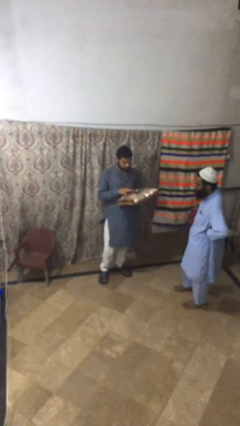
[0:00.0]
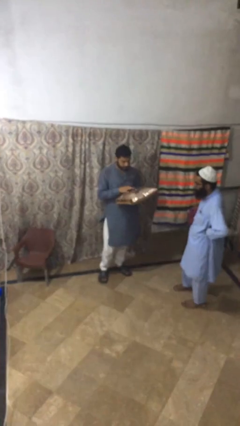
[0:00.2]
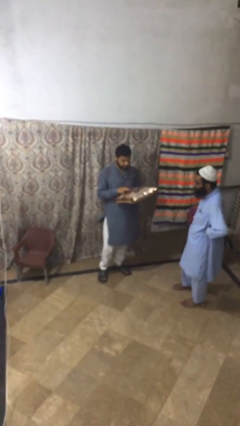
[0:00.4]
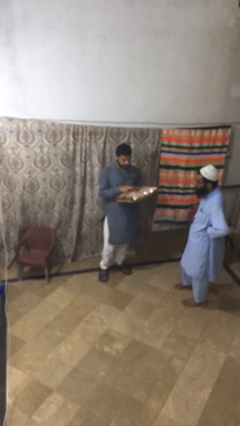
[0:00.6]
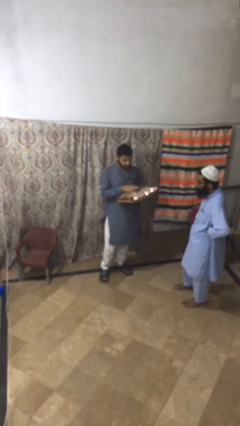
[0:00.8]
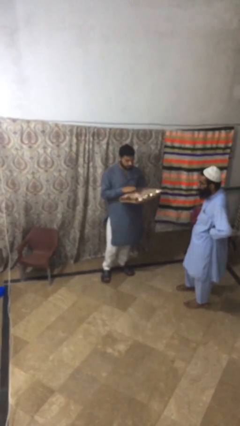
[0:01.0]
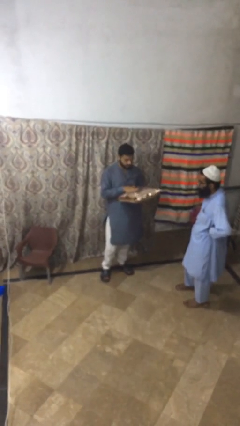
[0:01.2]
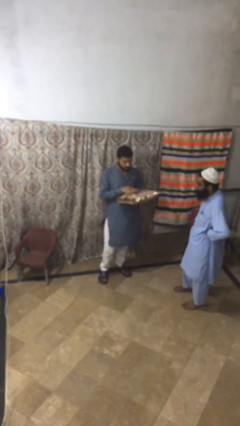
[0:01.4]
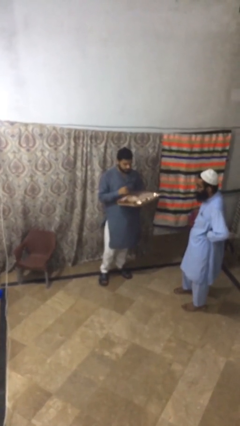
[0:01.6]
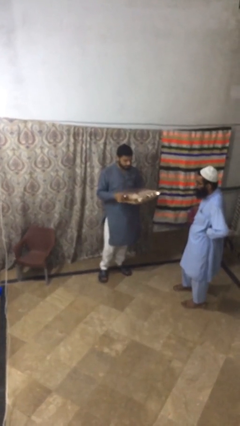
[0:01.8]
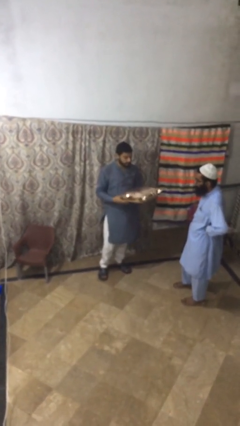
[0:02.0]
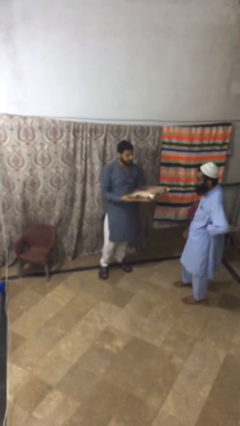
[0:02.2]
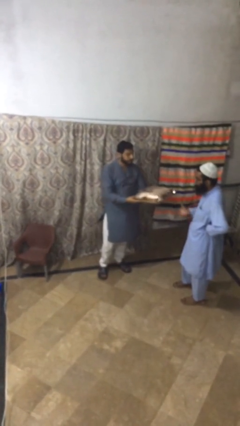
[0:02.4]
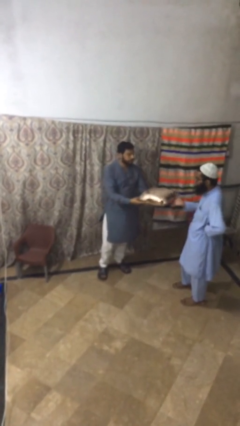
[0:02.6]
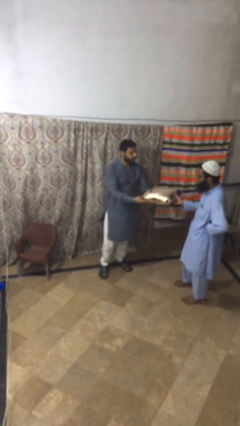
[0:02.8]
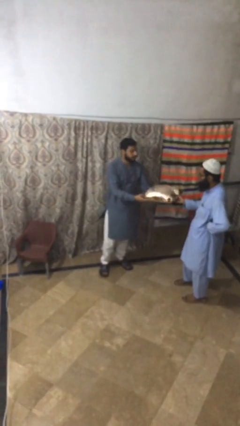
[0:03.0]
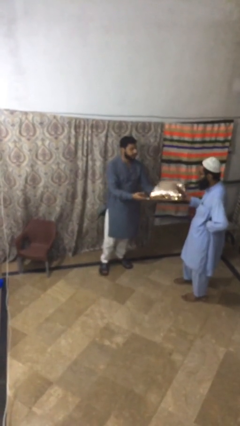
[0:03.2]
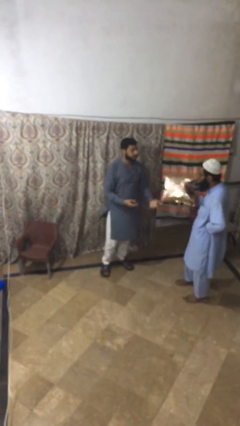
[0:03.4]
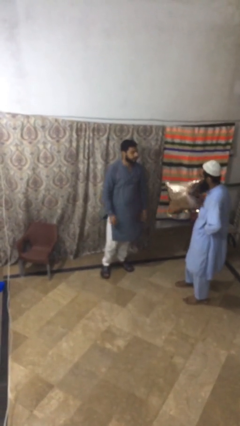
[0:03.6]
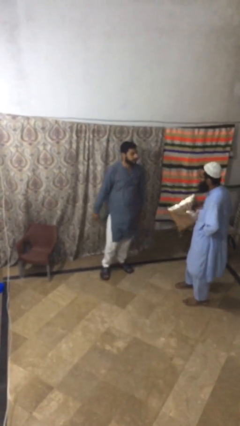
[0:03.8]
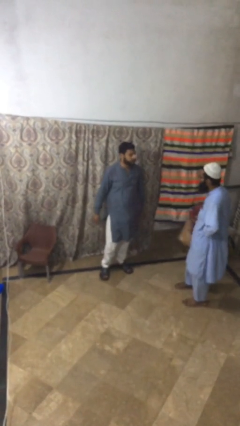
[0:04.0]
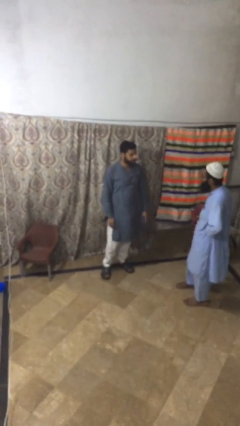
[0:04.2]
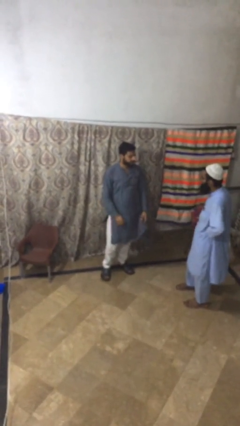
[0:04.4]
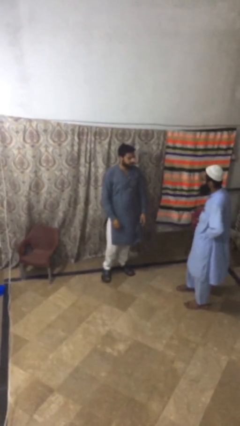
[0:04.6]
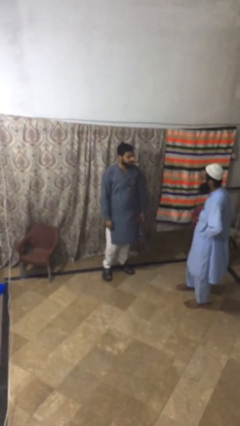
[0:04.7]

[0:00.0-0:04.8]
person transfers object to person

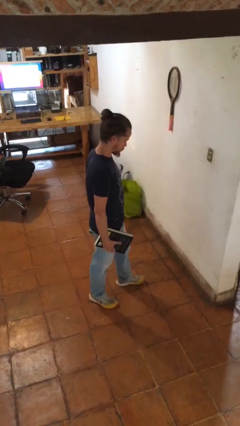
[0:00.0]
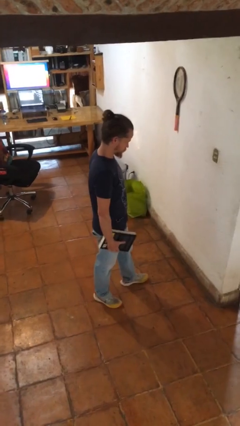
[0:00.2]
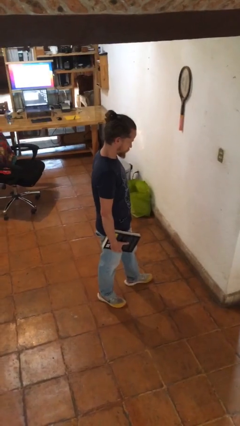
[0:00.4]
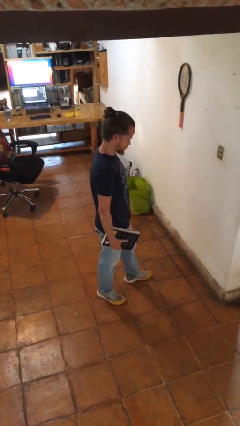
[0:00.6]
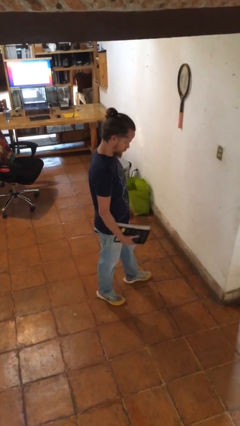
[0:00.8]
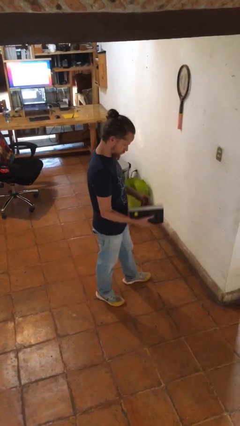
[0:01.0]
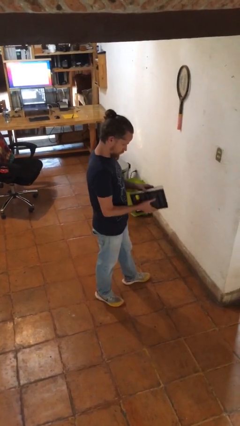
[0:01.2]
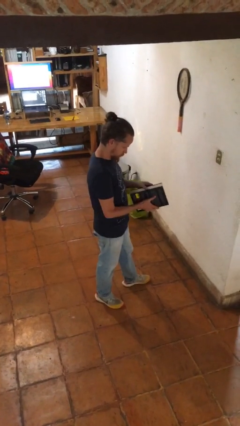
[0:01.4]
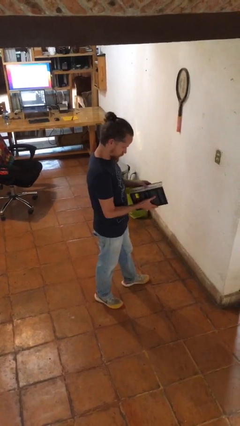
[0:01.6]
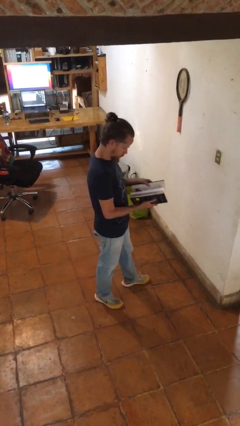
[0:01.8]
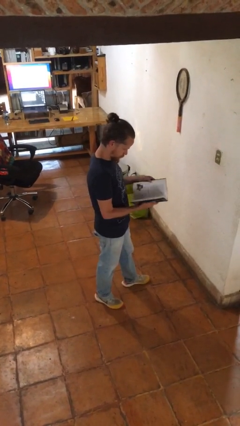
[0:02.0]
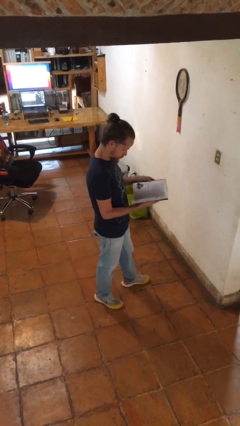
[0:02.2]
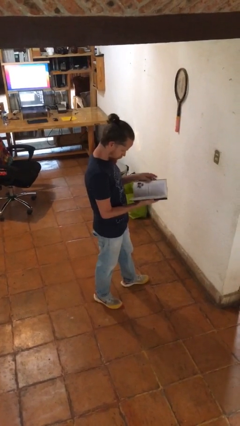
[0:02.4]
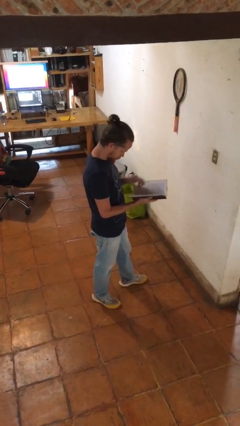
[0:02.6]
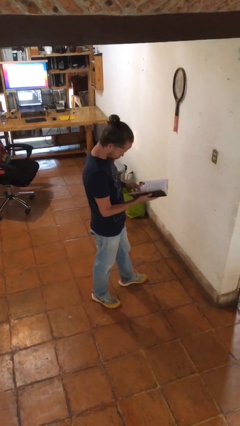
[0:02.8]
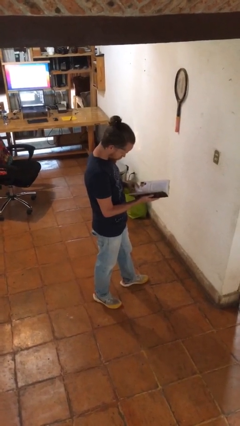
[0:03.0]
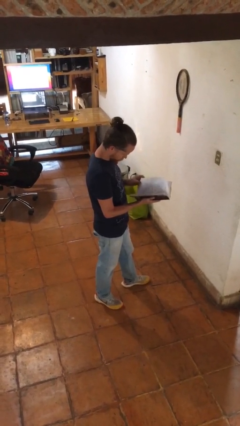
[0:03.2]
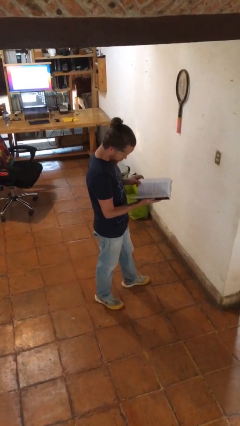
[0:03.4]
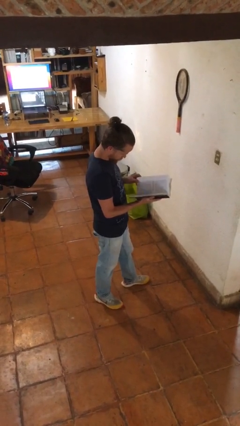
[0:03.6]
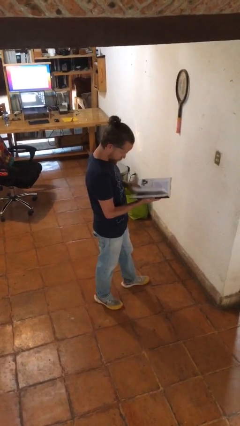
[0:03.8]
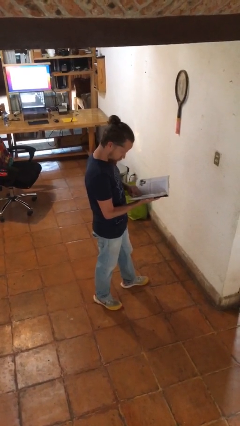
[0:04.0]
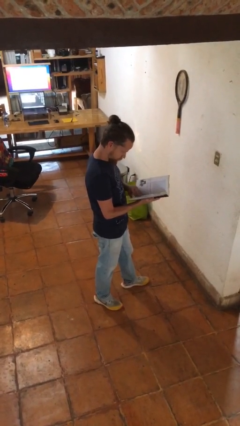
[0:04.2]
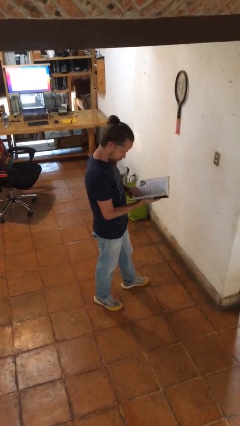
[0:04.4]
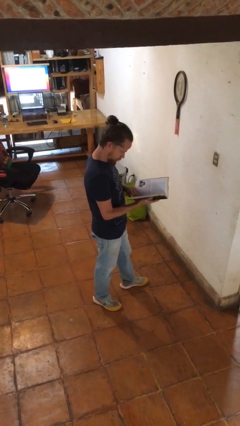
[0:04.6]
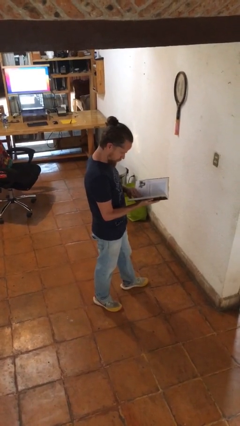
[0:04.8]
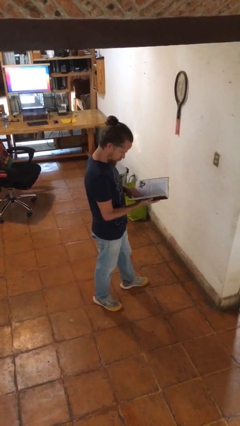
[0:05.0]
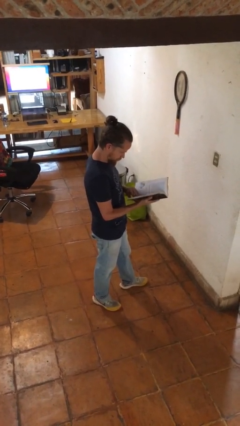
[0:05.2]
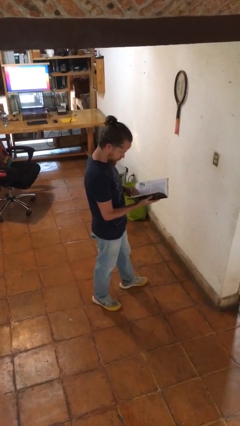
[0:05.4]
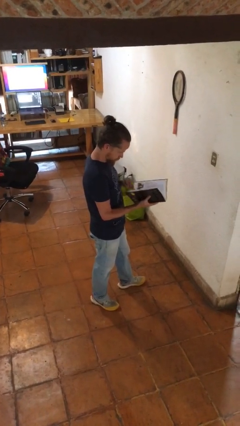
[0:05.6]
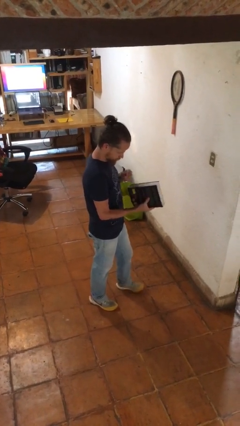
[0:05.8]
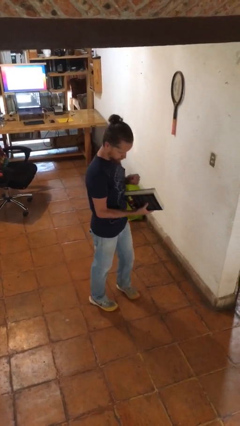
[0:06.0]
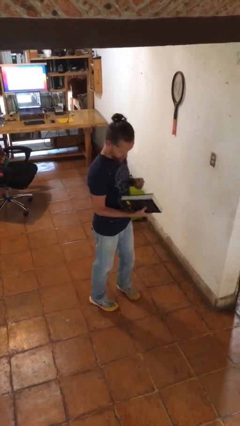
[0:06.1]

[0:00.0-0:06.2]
person reads book

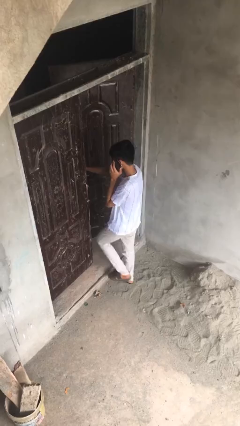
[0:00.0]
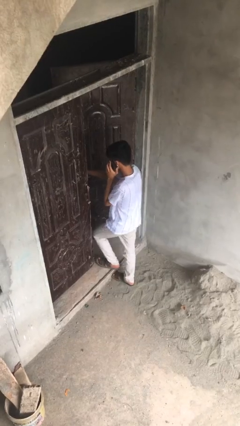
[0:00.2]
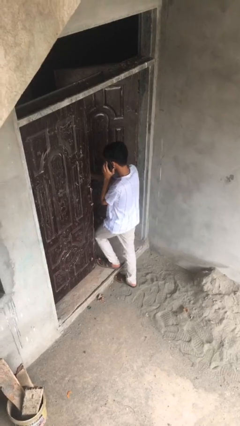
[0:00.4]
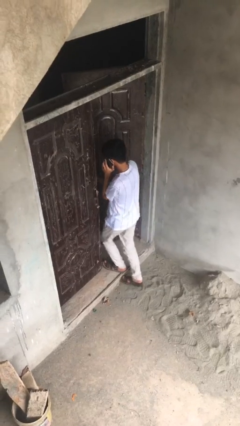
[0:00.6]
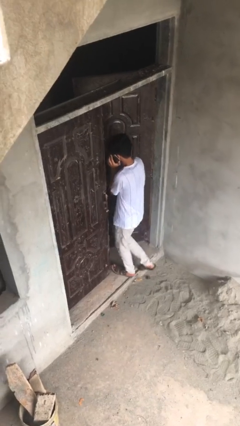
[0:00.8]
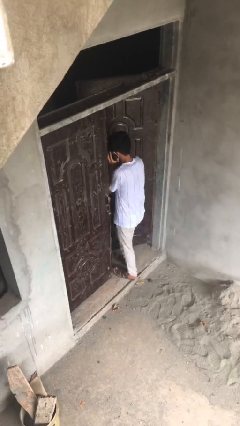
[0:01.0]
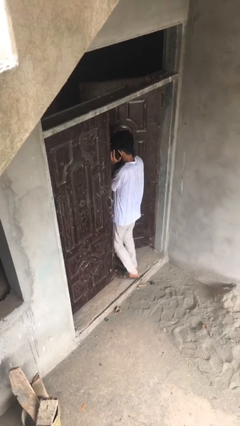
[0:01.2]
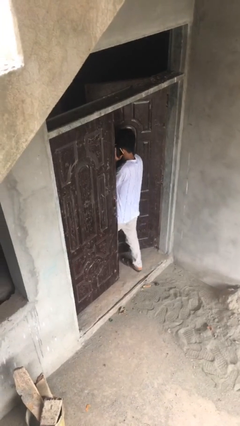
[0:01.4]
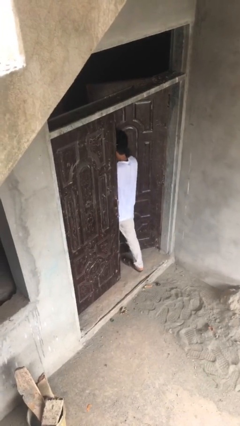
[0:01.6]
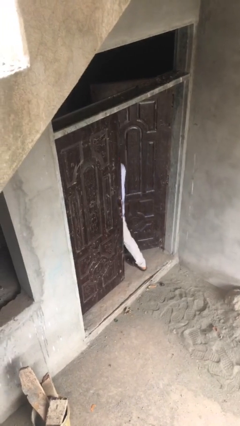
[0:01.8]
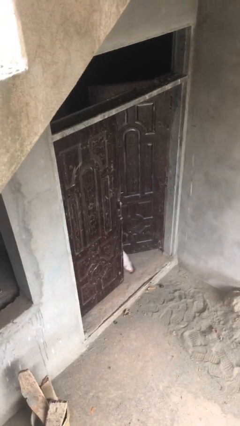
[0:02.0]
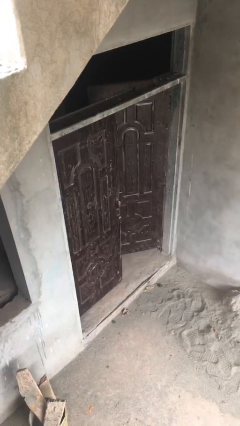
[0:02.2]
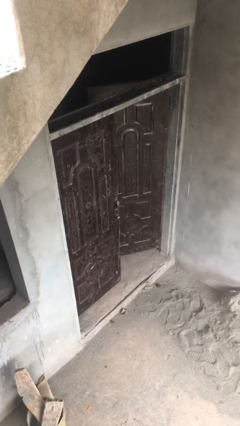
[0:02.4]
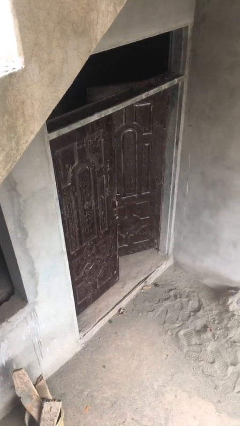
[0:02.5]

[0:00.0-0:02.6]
person exits scene through structure

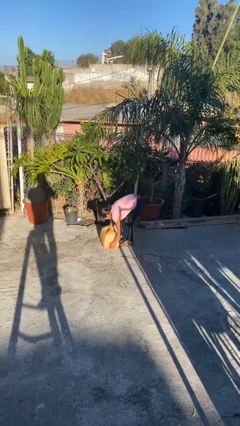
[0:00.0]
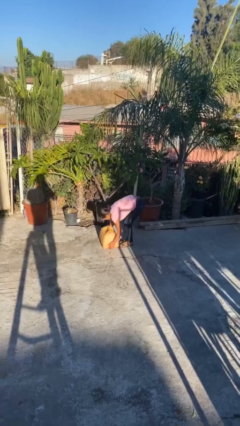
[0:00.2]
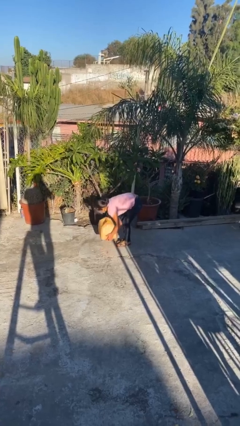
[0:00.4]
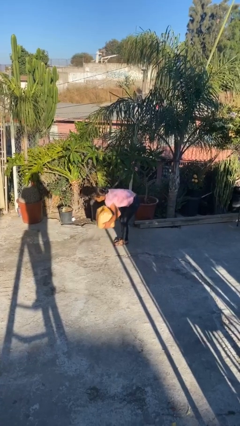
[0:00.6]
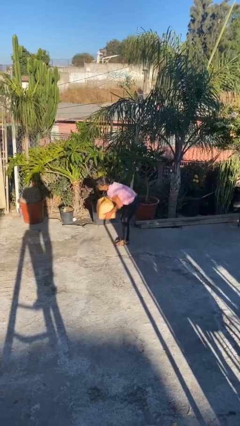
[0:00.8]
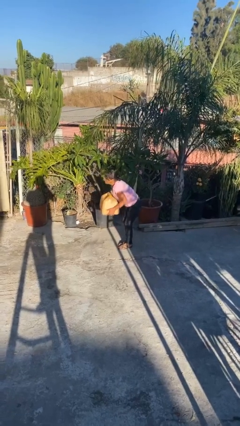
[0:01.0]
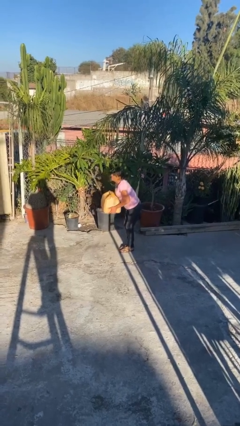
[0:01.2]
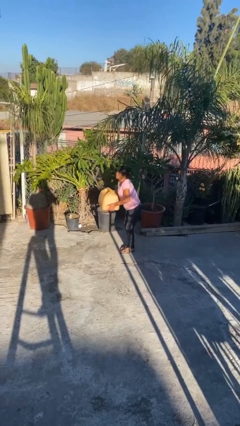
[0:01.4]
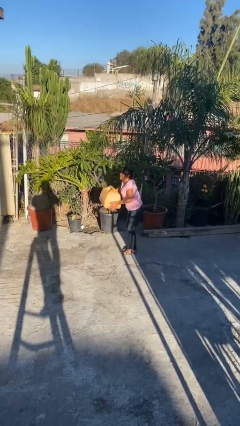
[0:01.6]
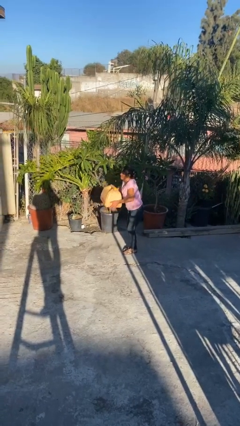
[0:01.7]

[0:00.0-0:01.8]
person picks up object from floor

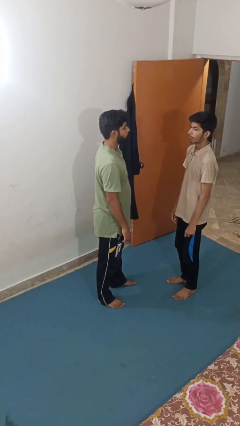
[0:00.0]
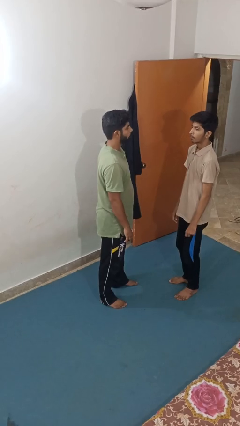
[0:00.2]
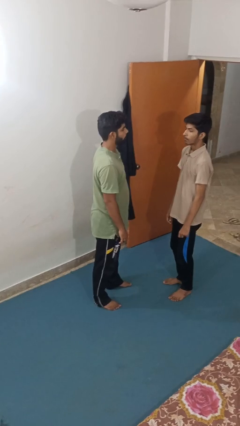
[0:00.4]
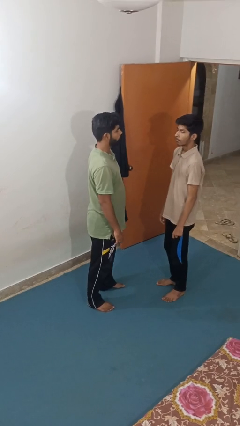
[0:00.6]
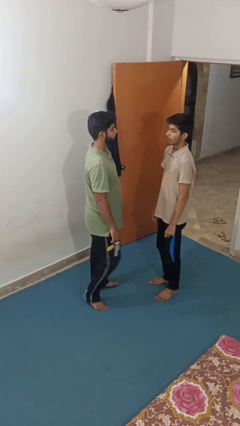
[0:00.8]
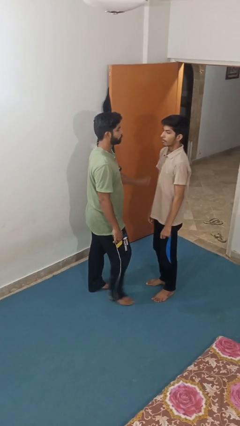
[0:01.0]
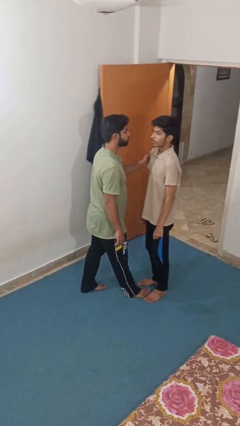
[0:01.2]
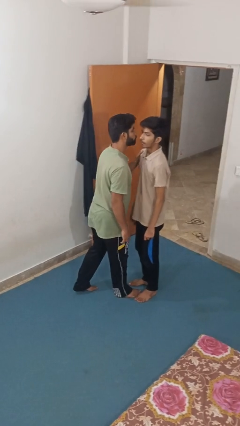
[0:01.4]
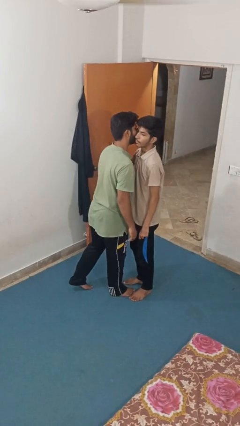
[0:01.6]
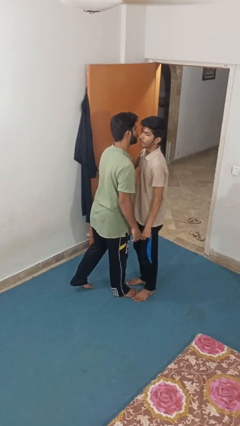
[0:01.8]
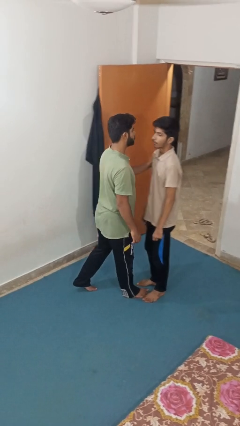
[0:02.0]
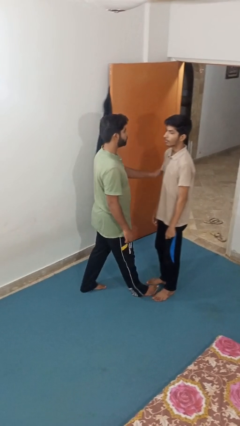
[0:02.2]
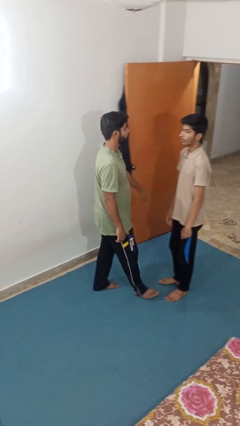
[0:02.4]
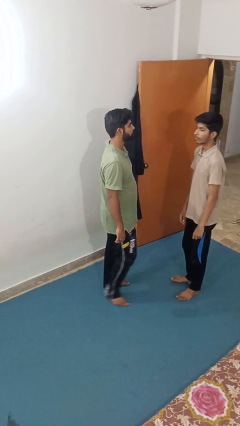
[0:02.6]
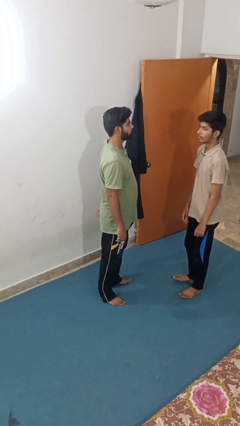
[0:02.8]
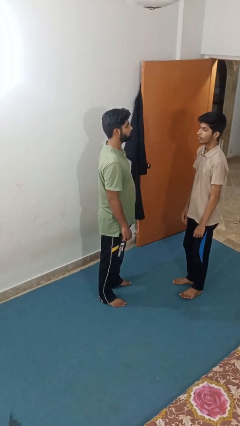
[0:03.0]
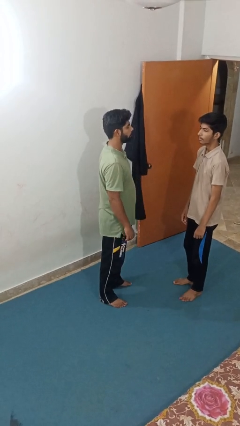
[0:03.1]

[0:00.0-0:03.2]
person kisses cheek of person
